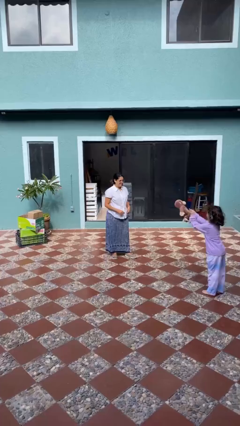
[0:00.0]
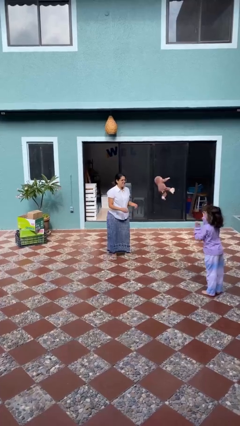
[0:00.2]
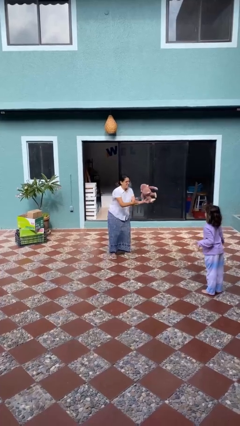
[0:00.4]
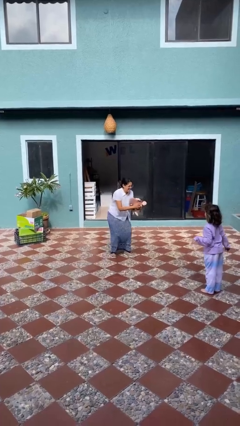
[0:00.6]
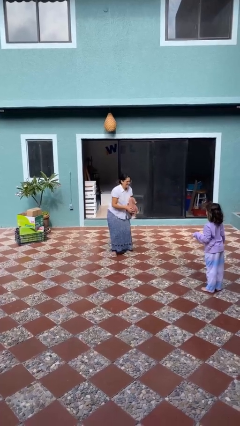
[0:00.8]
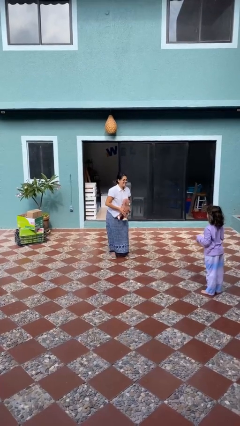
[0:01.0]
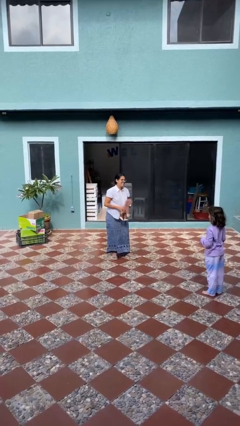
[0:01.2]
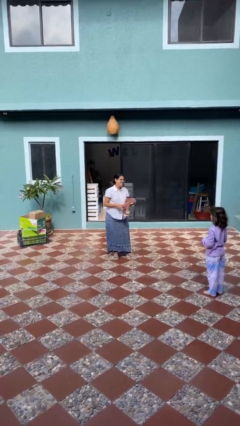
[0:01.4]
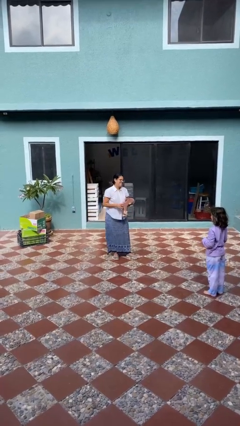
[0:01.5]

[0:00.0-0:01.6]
person catches object from person

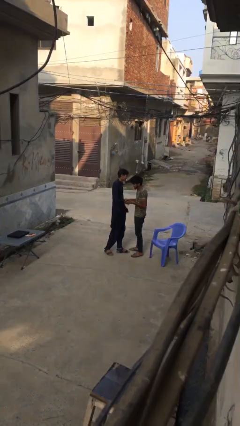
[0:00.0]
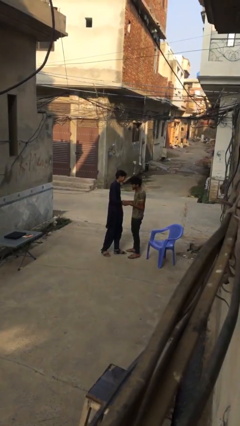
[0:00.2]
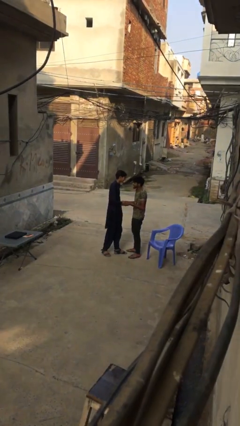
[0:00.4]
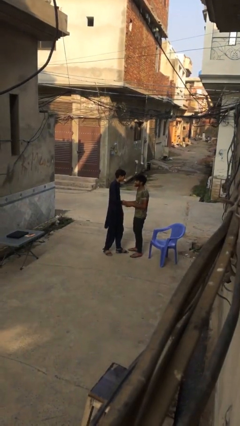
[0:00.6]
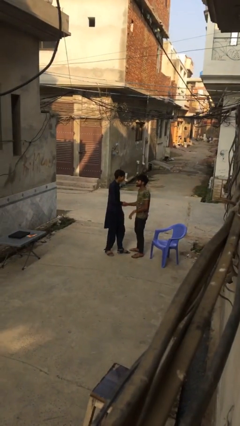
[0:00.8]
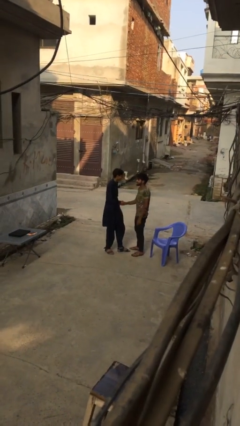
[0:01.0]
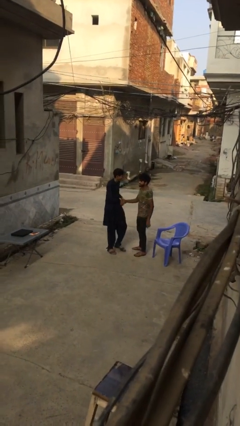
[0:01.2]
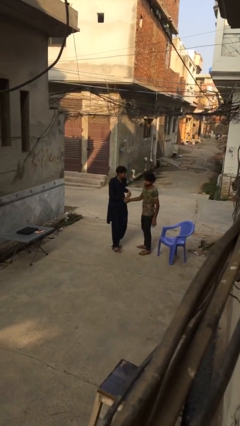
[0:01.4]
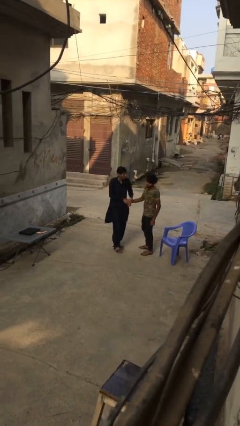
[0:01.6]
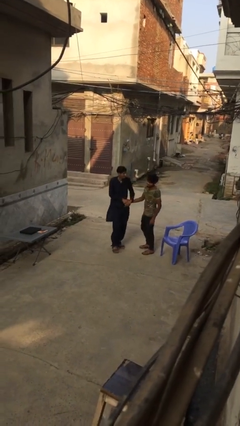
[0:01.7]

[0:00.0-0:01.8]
person shakes hand

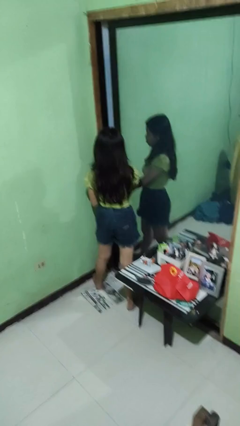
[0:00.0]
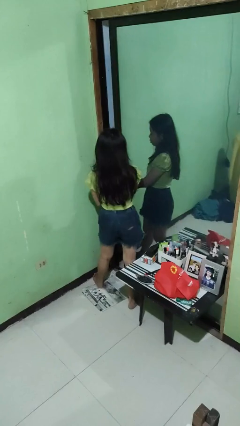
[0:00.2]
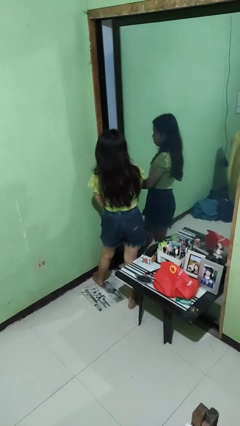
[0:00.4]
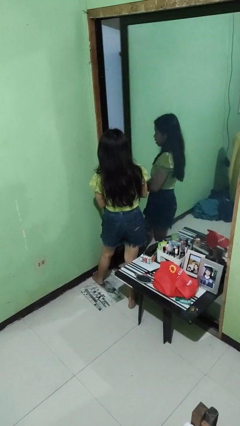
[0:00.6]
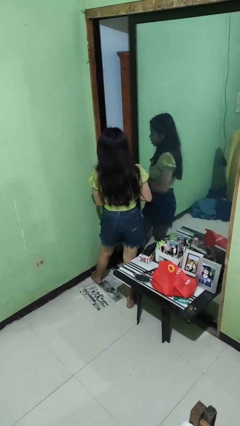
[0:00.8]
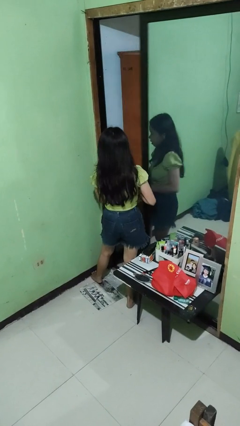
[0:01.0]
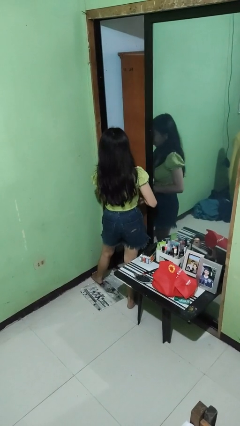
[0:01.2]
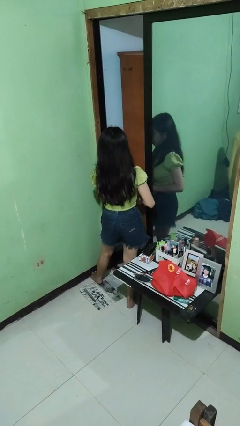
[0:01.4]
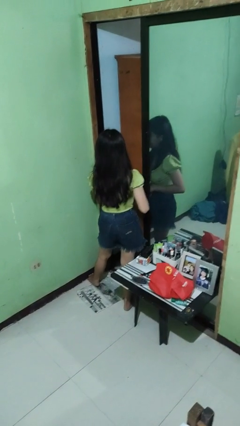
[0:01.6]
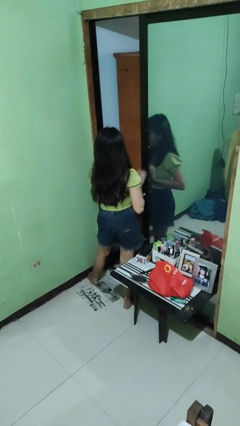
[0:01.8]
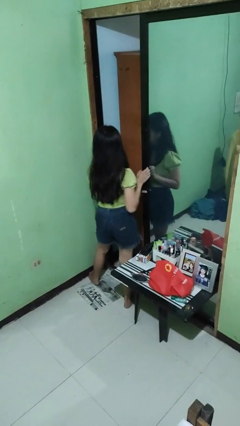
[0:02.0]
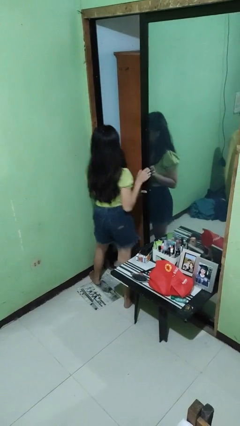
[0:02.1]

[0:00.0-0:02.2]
person opens sliding door

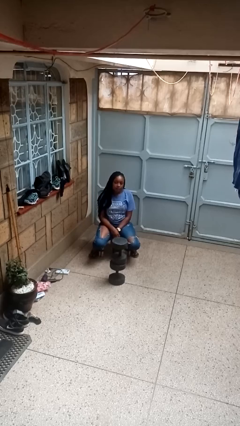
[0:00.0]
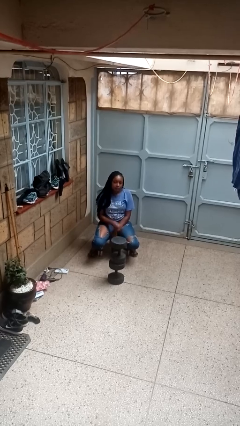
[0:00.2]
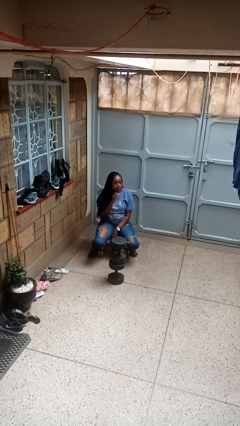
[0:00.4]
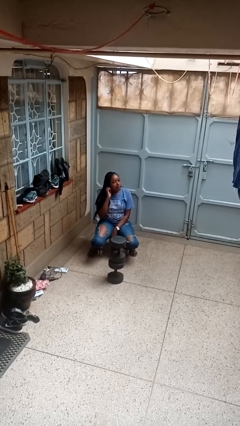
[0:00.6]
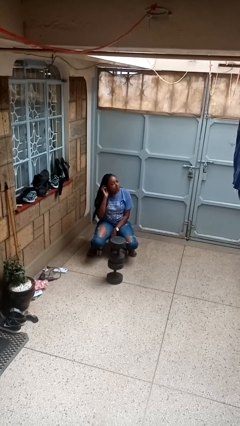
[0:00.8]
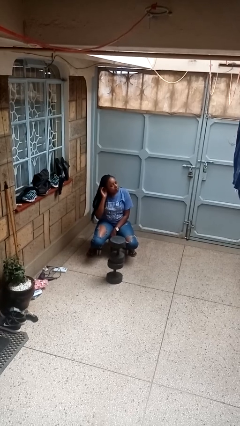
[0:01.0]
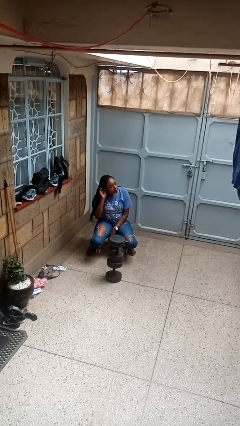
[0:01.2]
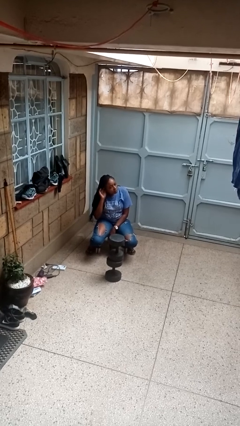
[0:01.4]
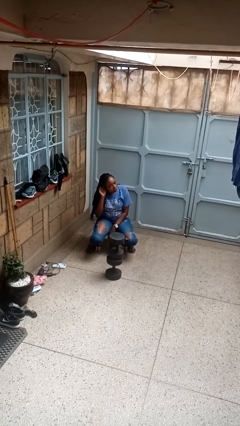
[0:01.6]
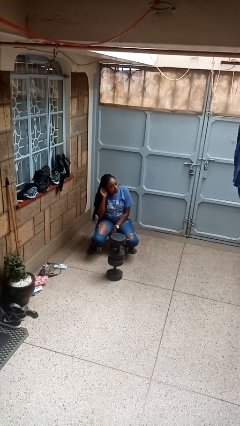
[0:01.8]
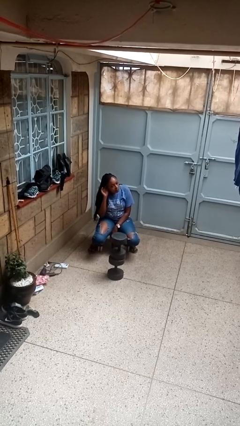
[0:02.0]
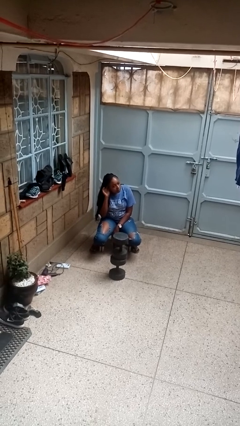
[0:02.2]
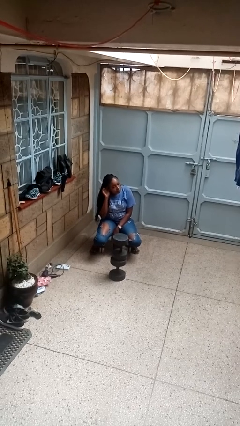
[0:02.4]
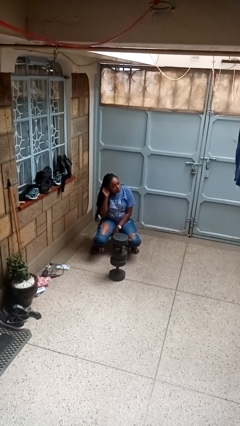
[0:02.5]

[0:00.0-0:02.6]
person gestures listen closely

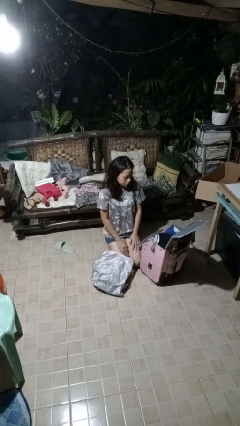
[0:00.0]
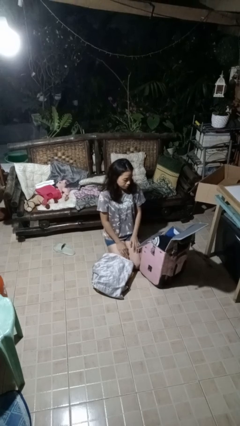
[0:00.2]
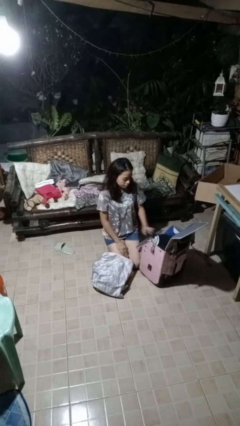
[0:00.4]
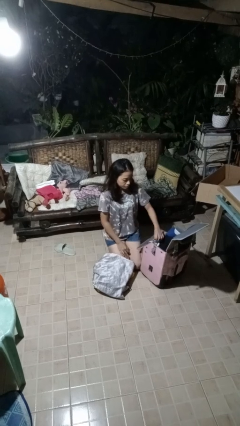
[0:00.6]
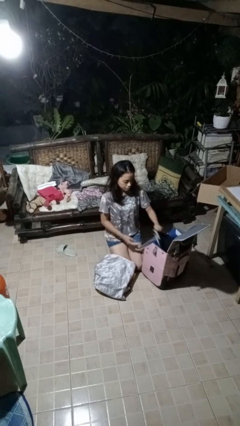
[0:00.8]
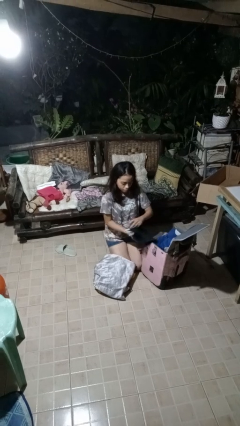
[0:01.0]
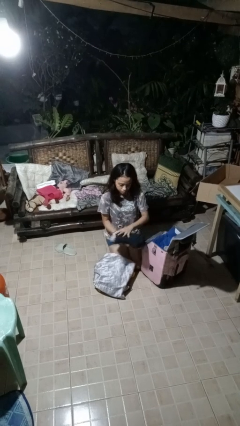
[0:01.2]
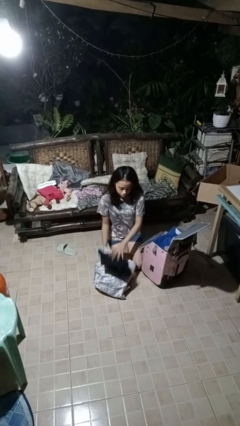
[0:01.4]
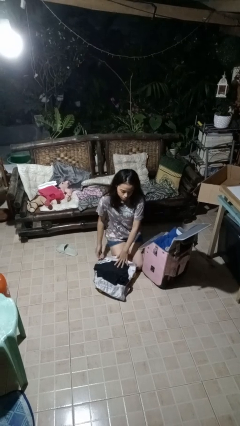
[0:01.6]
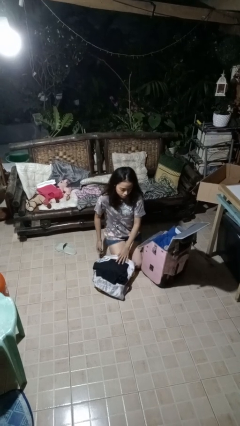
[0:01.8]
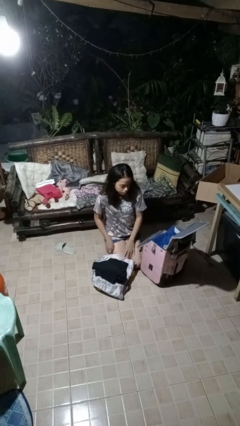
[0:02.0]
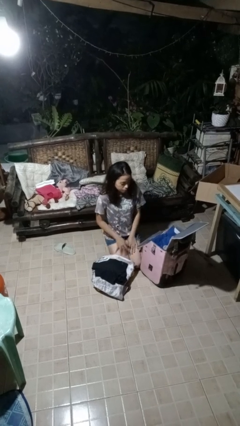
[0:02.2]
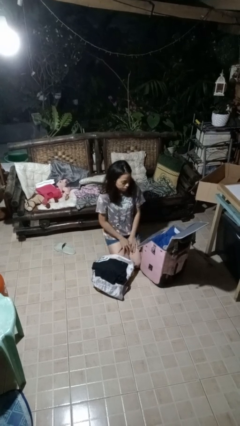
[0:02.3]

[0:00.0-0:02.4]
person unloads clothes from suitcase

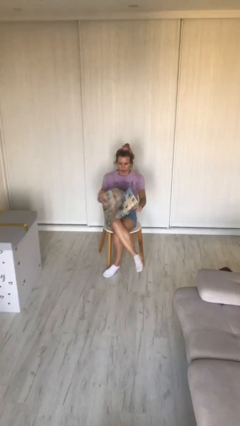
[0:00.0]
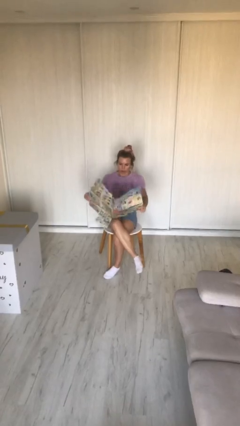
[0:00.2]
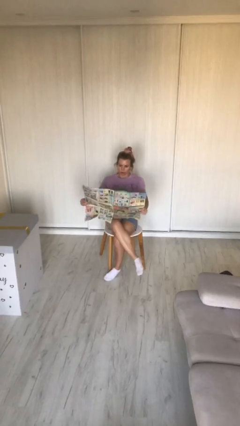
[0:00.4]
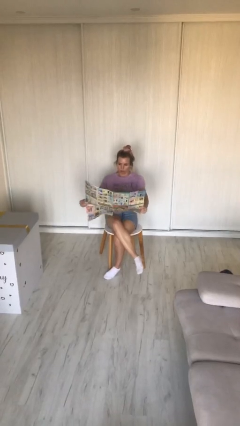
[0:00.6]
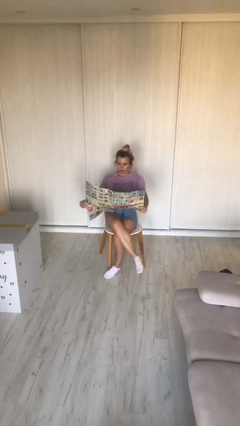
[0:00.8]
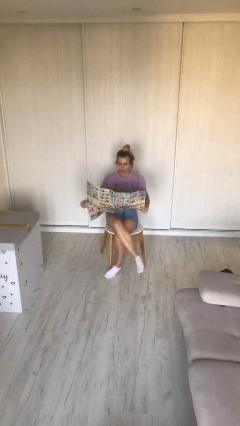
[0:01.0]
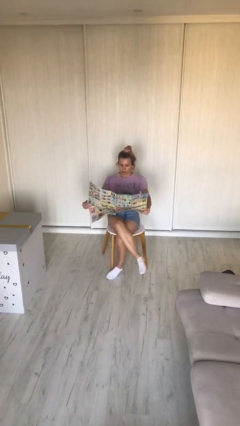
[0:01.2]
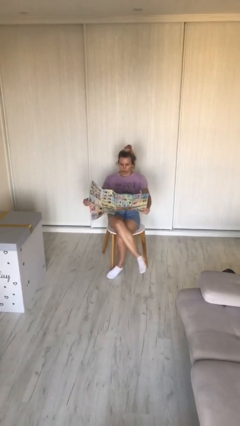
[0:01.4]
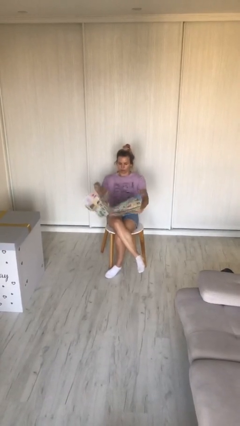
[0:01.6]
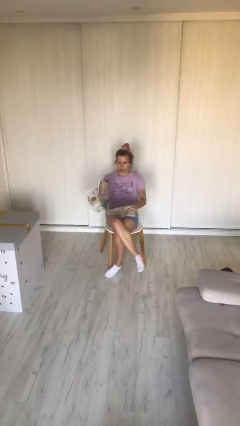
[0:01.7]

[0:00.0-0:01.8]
person reads newspaper

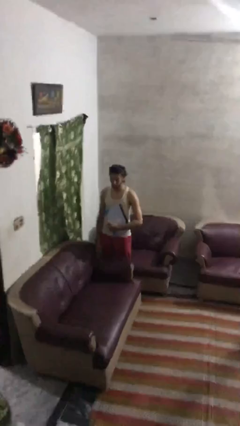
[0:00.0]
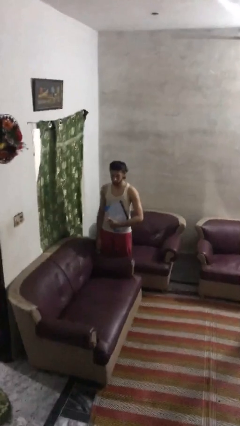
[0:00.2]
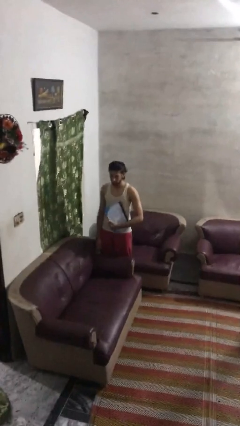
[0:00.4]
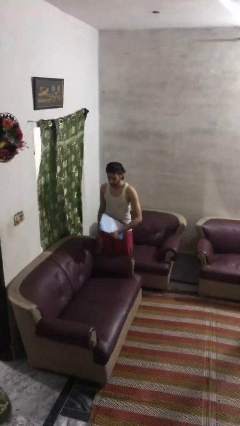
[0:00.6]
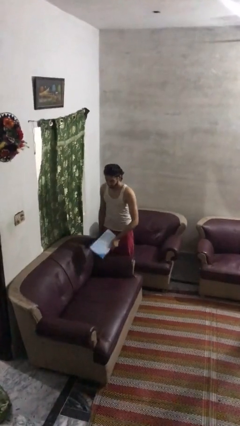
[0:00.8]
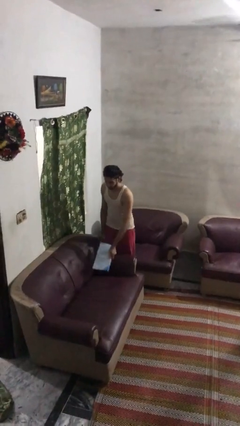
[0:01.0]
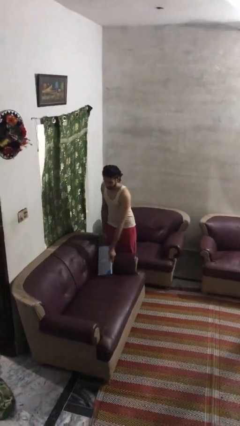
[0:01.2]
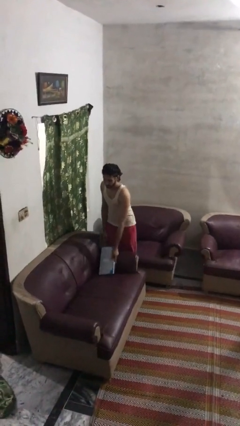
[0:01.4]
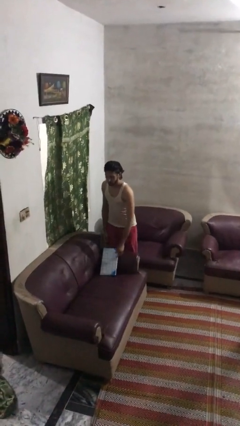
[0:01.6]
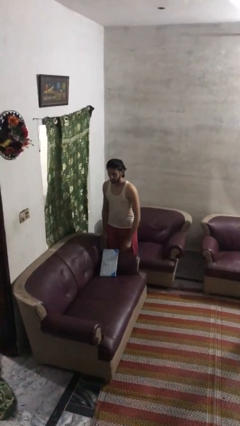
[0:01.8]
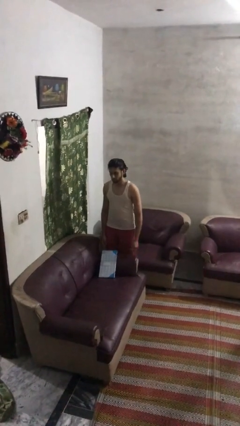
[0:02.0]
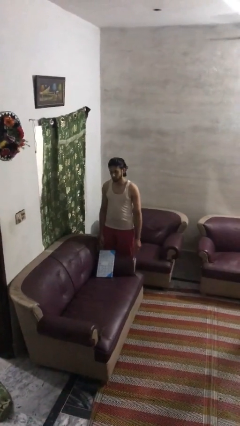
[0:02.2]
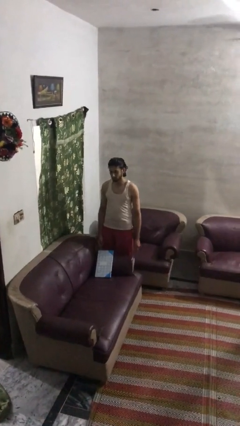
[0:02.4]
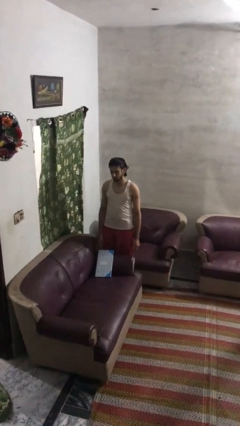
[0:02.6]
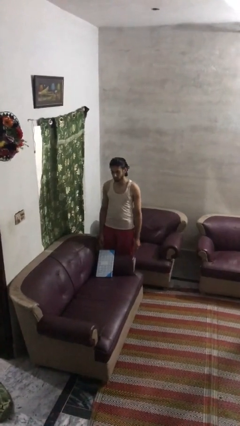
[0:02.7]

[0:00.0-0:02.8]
person puts down object on couch

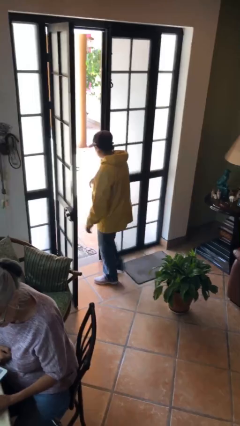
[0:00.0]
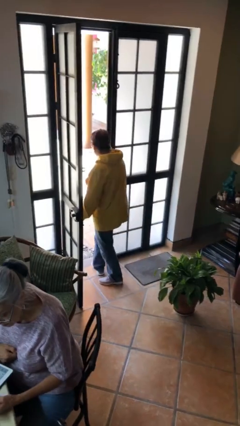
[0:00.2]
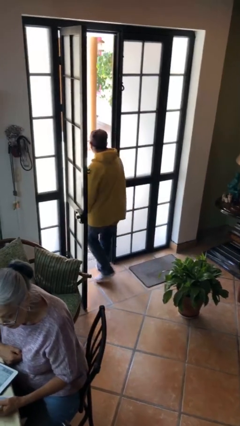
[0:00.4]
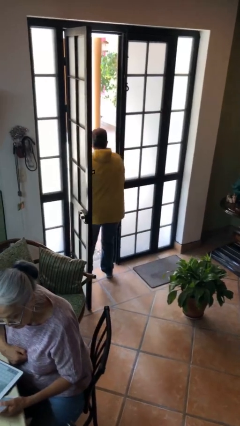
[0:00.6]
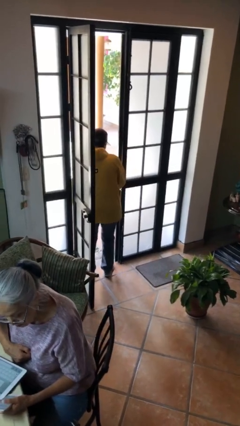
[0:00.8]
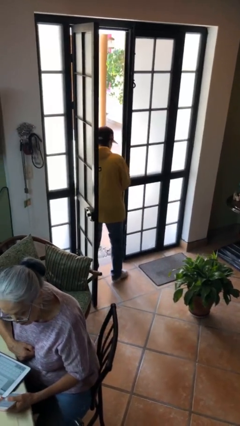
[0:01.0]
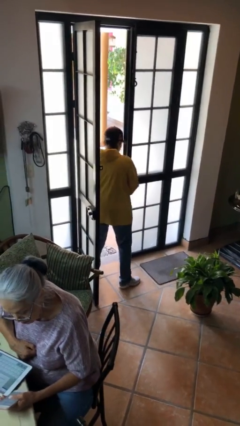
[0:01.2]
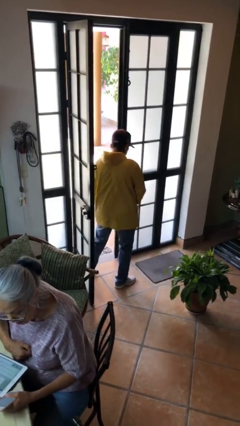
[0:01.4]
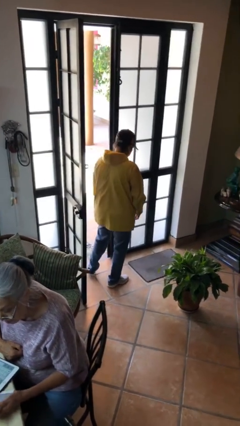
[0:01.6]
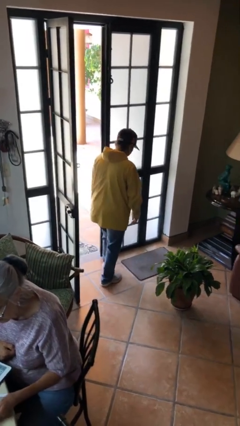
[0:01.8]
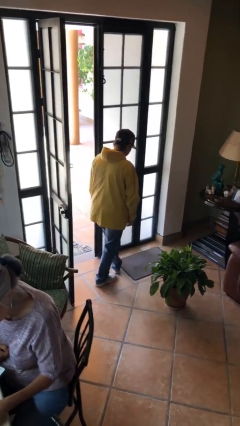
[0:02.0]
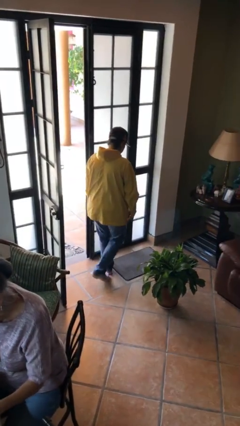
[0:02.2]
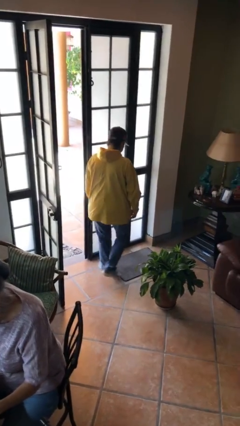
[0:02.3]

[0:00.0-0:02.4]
person bumps into wall
